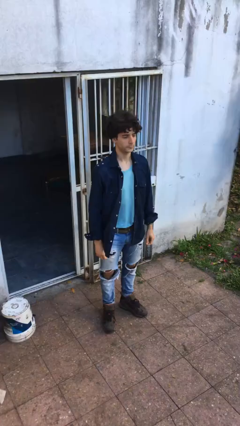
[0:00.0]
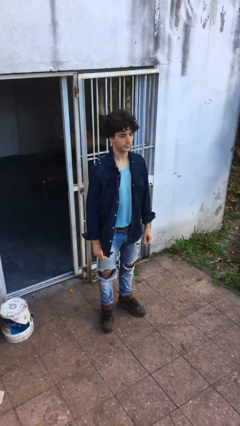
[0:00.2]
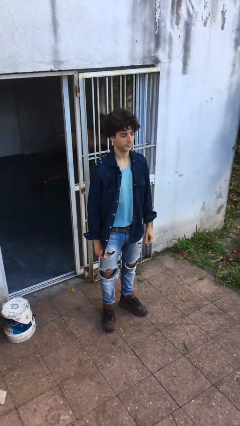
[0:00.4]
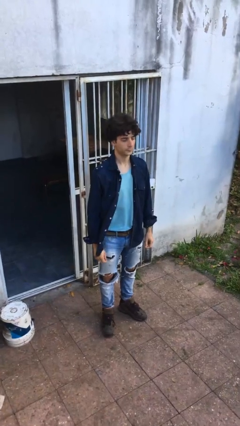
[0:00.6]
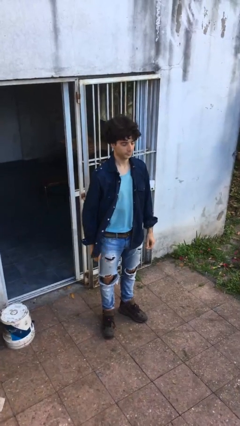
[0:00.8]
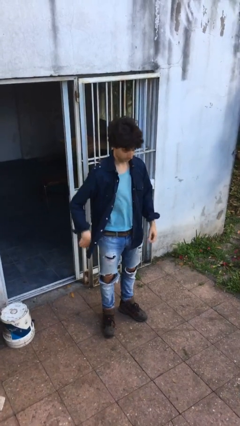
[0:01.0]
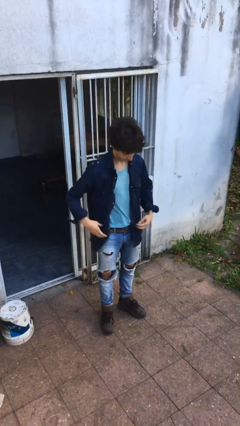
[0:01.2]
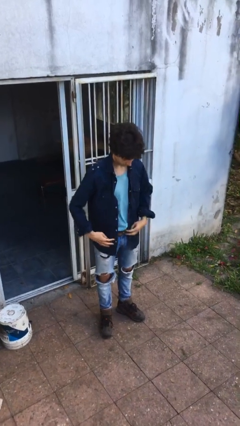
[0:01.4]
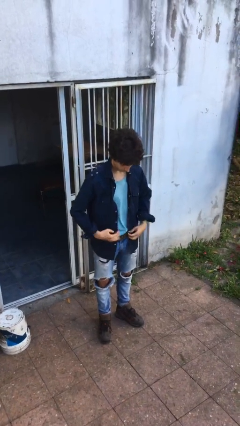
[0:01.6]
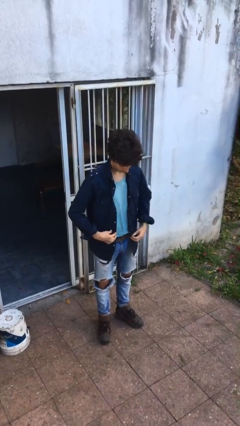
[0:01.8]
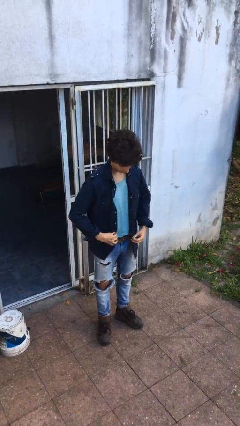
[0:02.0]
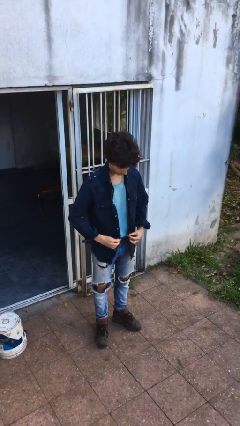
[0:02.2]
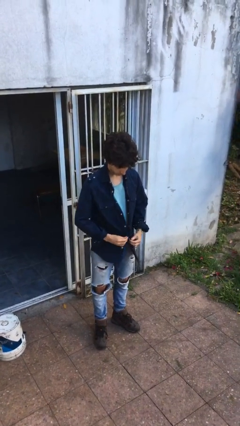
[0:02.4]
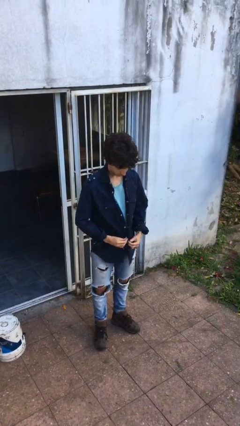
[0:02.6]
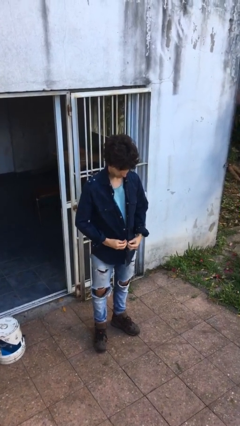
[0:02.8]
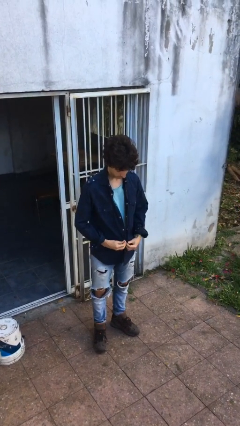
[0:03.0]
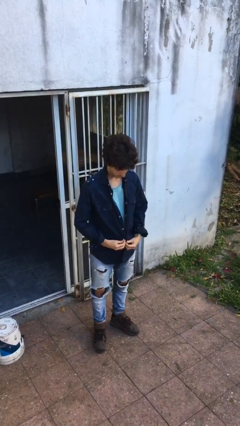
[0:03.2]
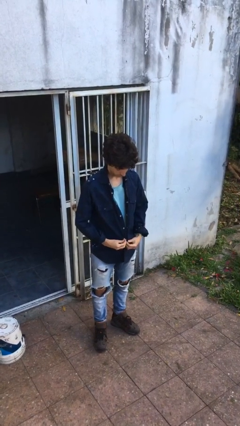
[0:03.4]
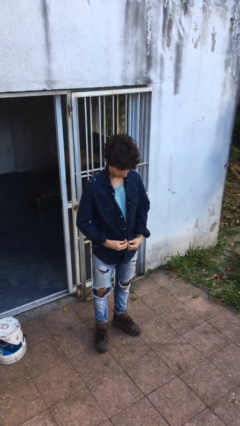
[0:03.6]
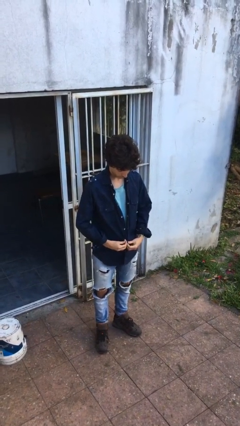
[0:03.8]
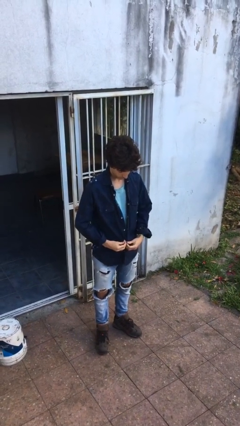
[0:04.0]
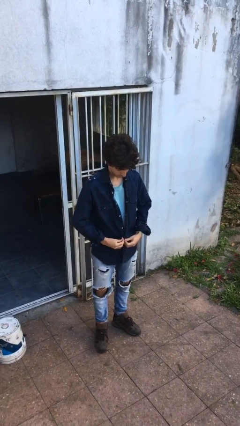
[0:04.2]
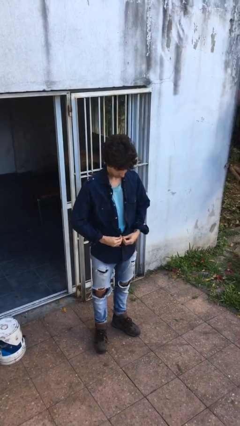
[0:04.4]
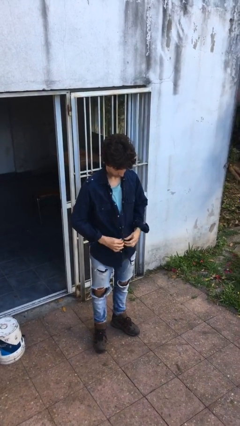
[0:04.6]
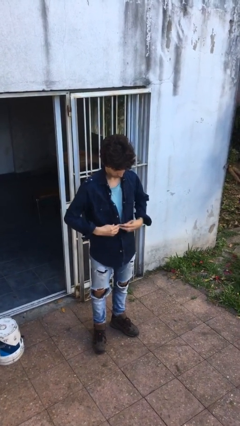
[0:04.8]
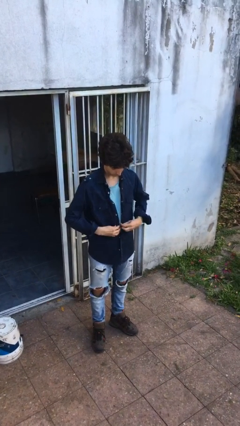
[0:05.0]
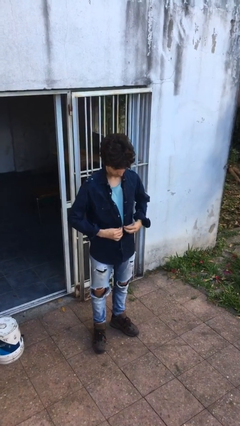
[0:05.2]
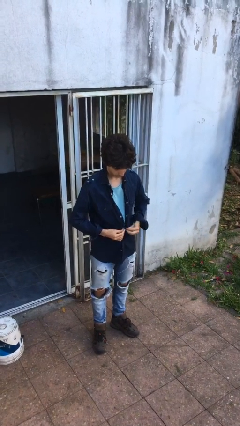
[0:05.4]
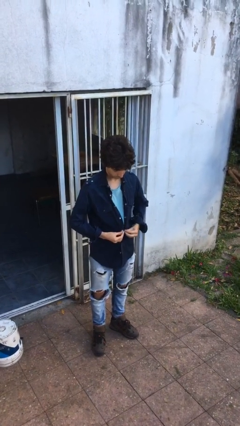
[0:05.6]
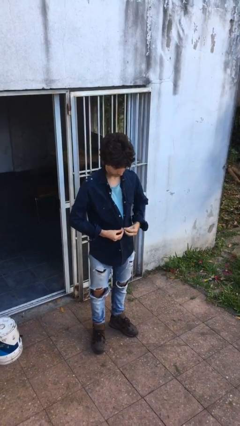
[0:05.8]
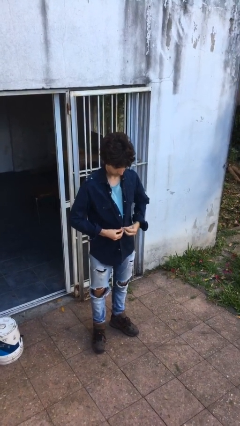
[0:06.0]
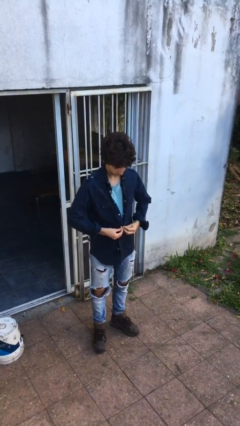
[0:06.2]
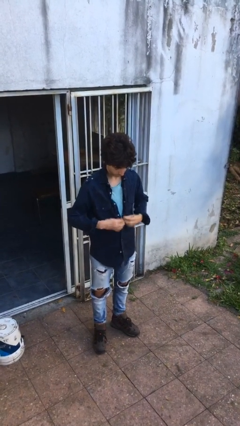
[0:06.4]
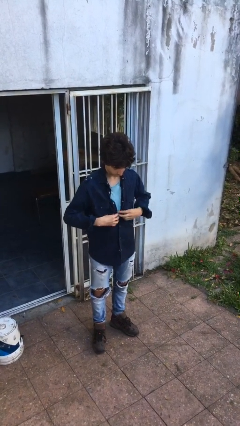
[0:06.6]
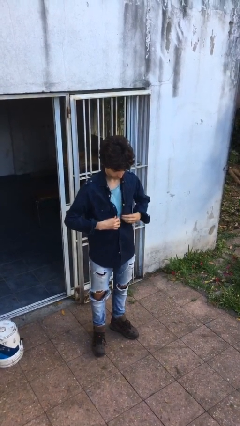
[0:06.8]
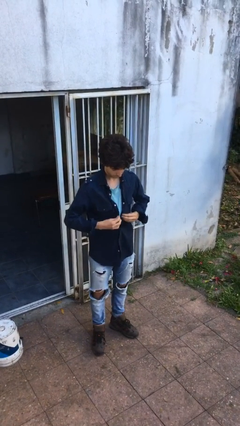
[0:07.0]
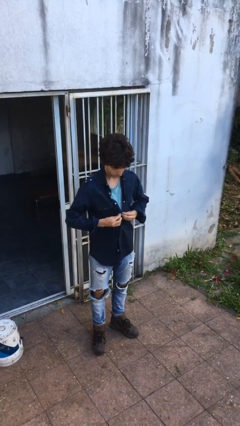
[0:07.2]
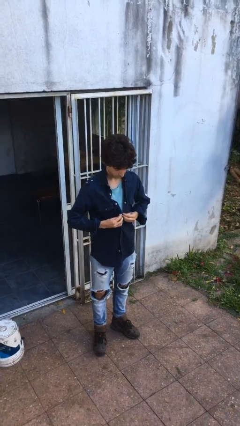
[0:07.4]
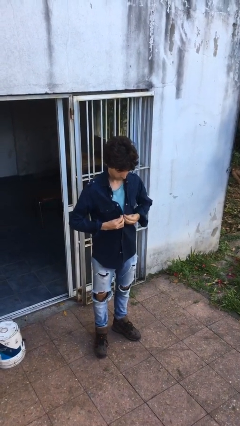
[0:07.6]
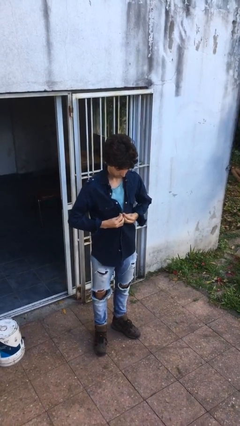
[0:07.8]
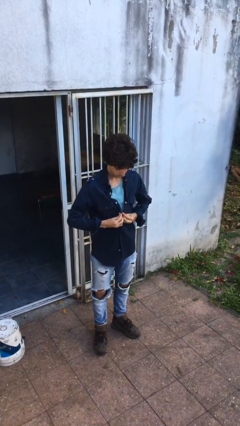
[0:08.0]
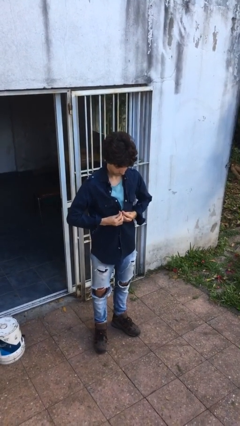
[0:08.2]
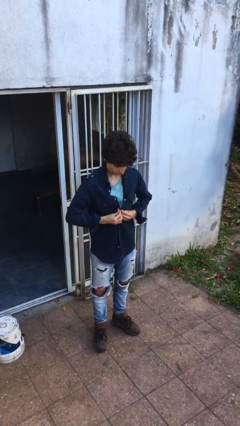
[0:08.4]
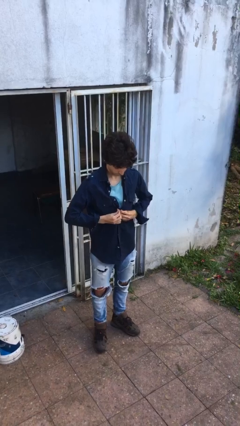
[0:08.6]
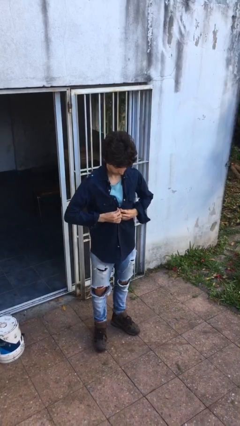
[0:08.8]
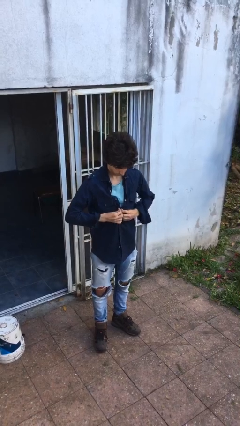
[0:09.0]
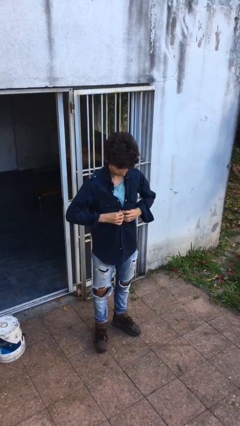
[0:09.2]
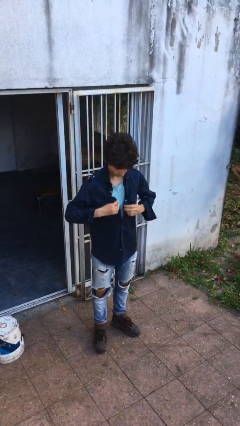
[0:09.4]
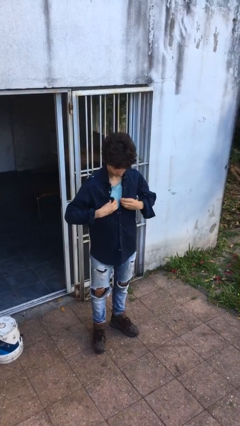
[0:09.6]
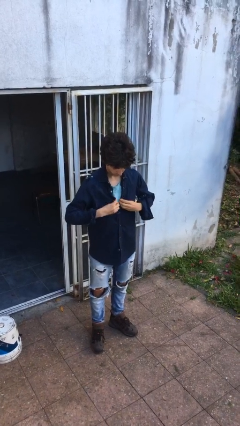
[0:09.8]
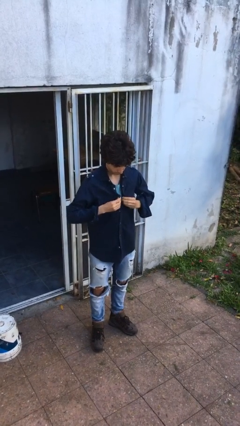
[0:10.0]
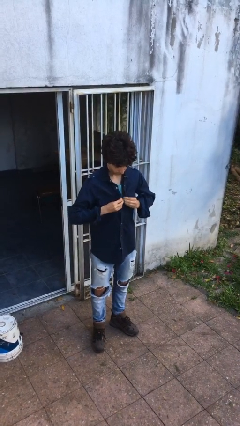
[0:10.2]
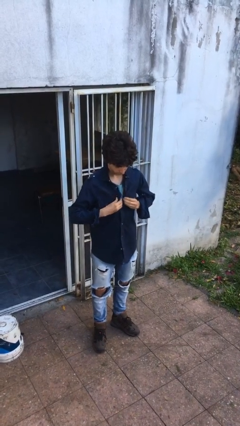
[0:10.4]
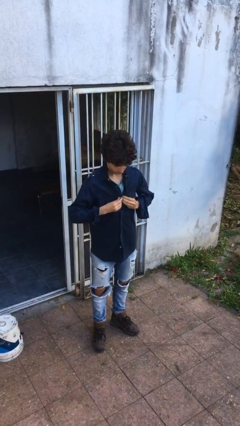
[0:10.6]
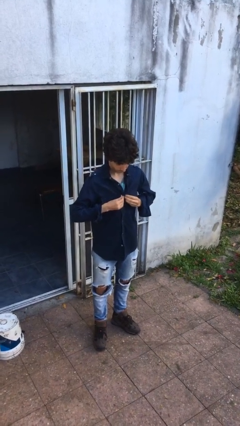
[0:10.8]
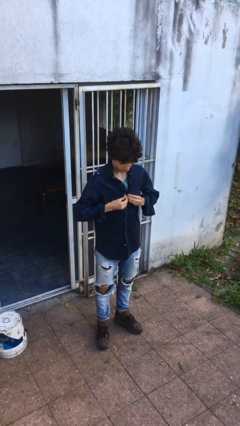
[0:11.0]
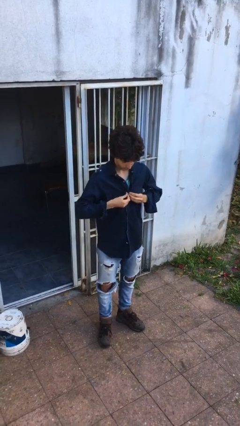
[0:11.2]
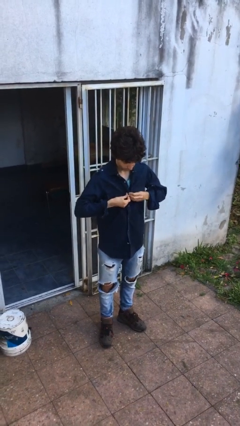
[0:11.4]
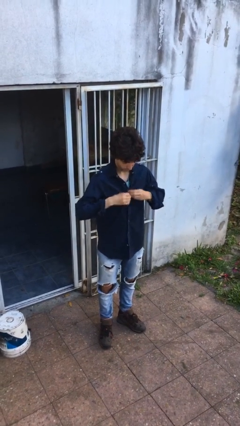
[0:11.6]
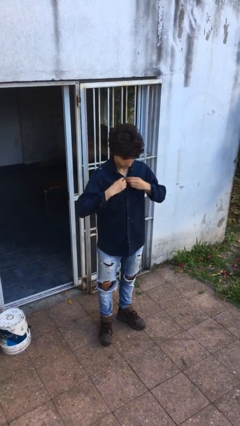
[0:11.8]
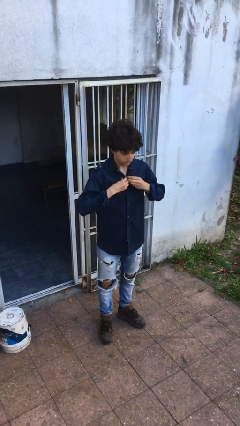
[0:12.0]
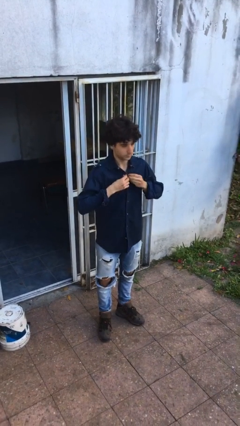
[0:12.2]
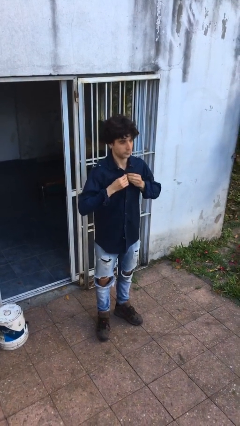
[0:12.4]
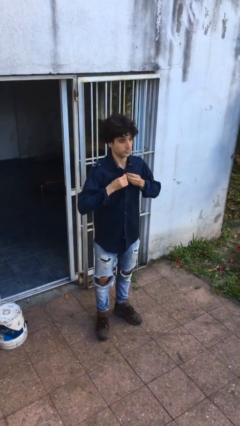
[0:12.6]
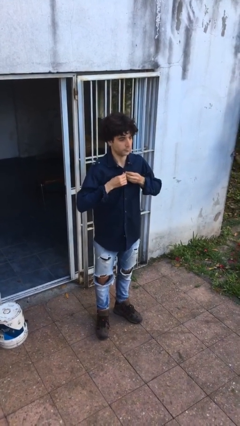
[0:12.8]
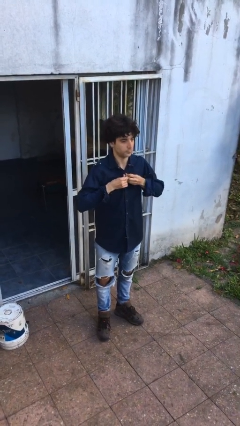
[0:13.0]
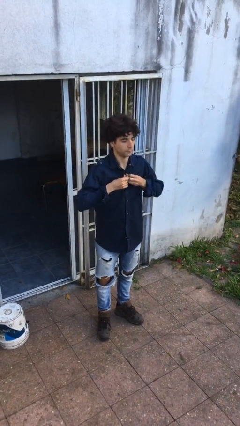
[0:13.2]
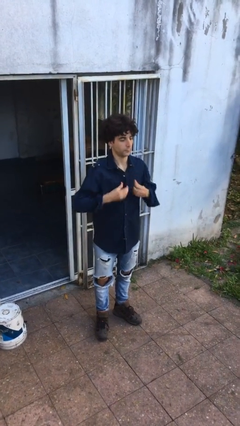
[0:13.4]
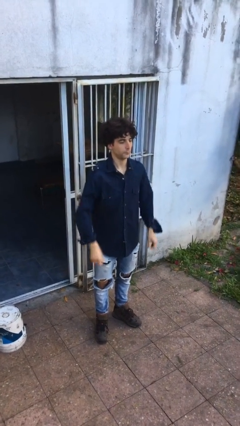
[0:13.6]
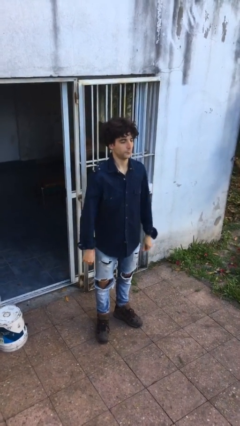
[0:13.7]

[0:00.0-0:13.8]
person buttons shirt

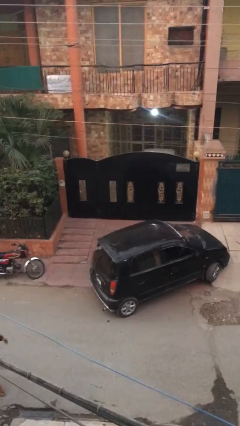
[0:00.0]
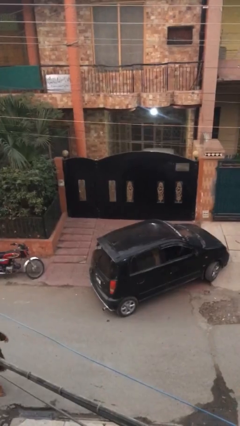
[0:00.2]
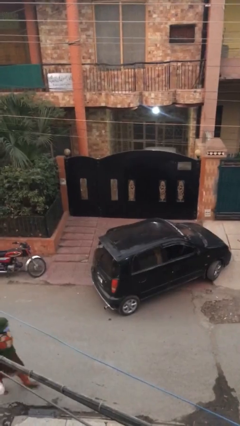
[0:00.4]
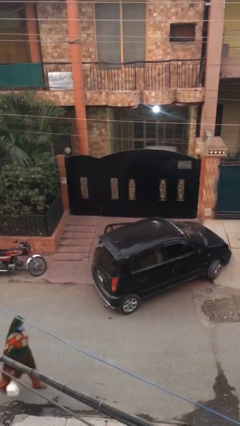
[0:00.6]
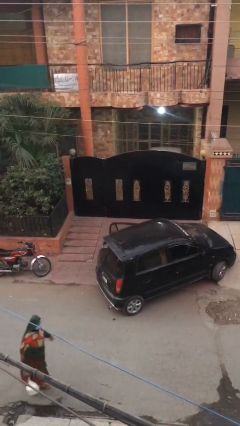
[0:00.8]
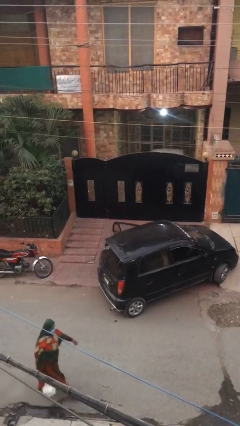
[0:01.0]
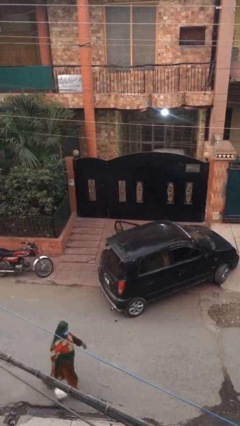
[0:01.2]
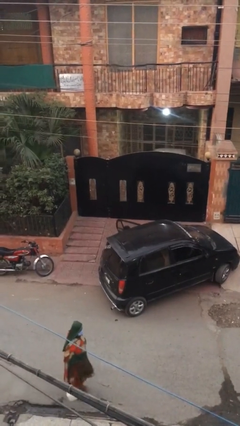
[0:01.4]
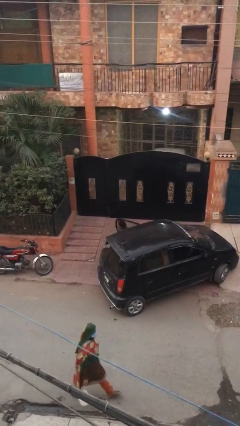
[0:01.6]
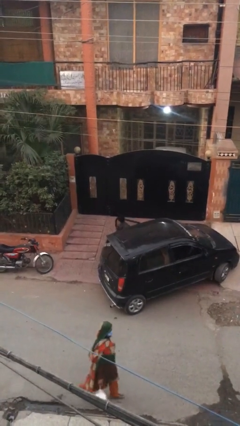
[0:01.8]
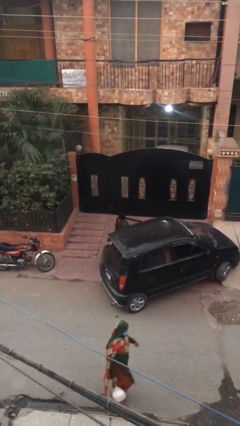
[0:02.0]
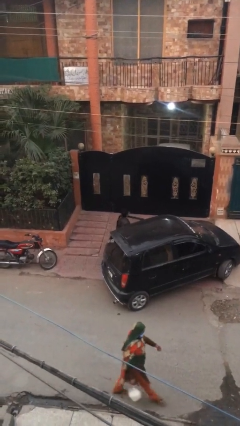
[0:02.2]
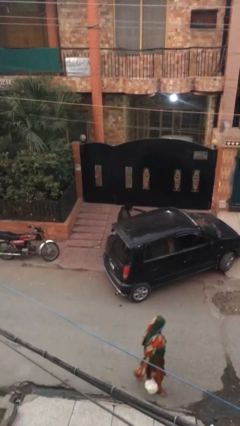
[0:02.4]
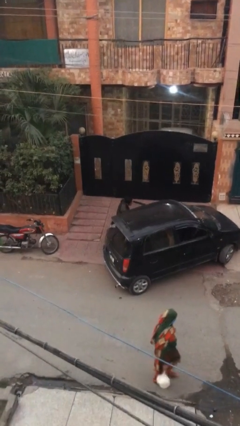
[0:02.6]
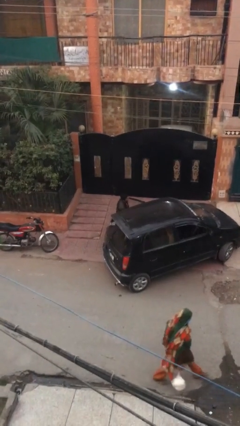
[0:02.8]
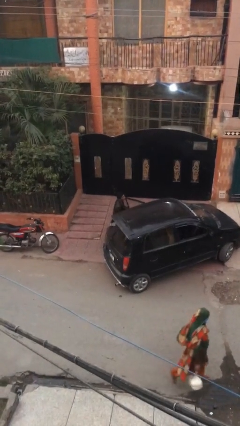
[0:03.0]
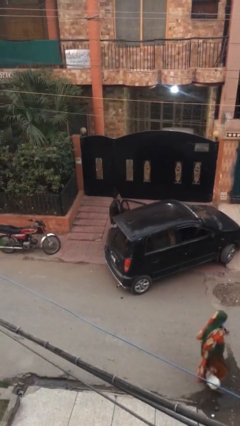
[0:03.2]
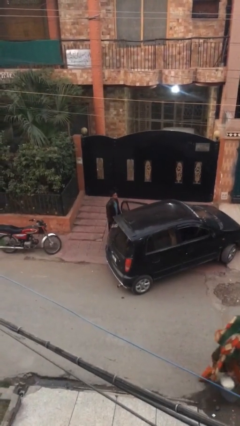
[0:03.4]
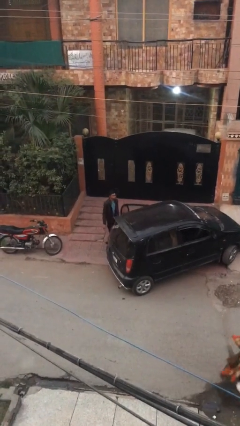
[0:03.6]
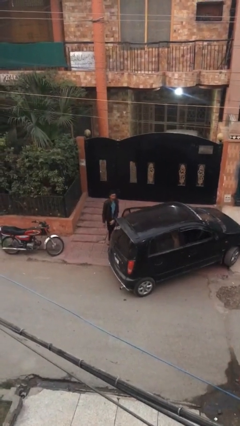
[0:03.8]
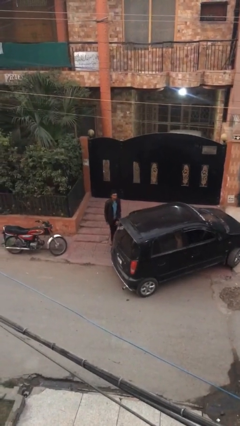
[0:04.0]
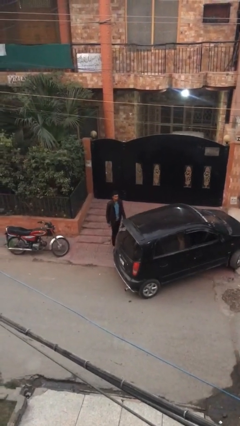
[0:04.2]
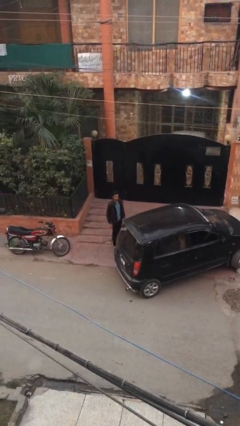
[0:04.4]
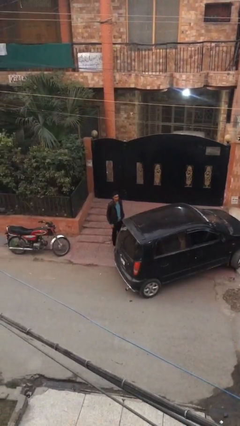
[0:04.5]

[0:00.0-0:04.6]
person exits car
